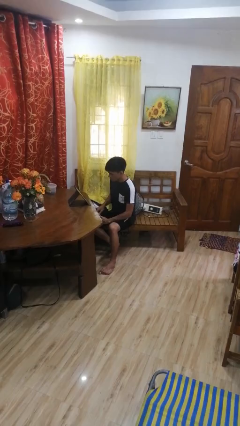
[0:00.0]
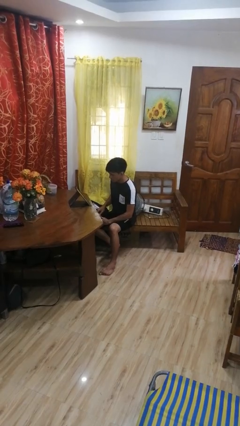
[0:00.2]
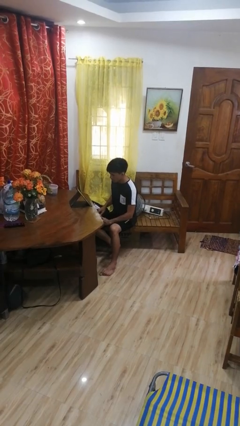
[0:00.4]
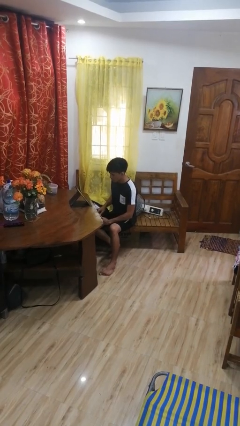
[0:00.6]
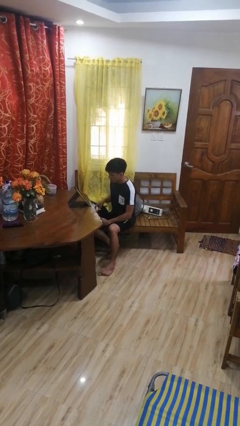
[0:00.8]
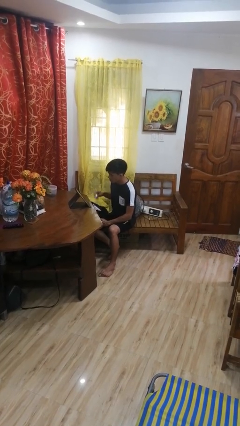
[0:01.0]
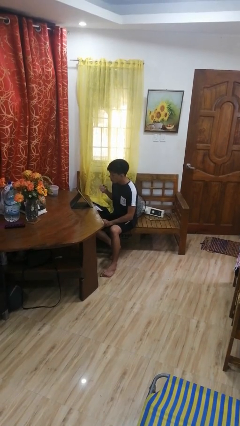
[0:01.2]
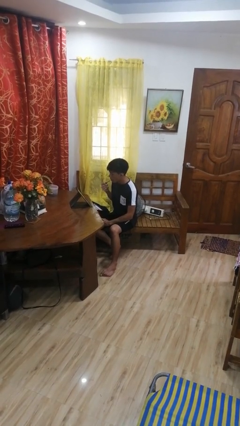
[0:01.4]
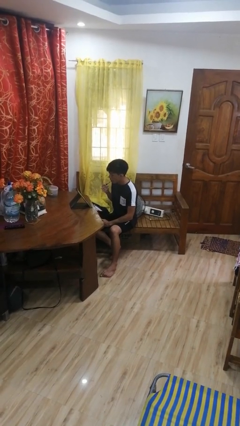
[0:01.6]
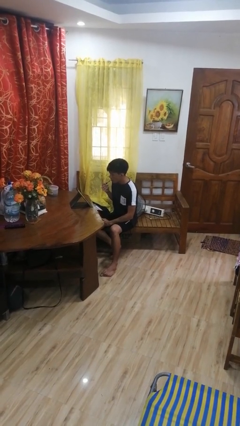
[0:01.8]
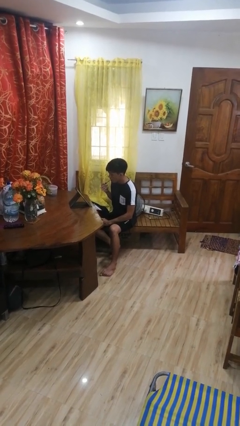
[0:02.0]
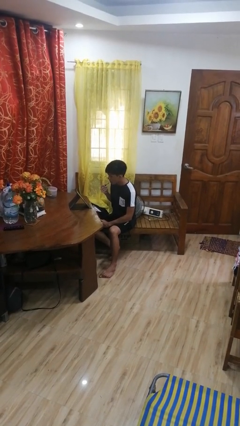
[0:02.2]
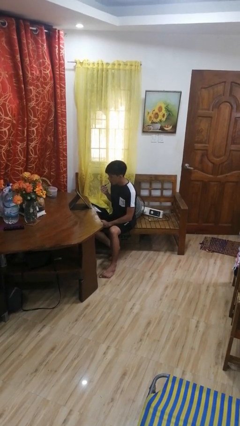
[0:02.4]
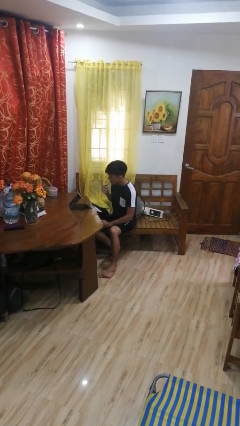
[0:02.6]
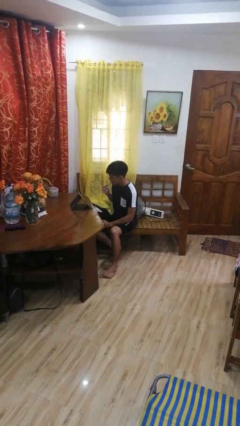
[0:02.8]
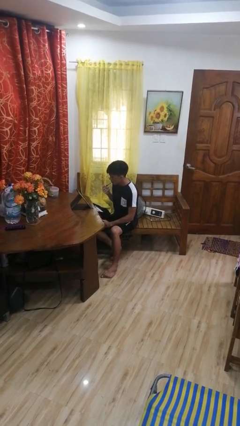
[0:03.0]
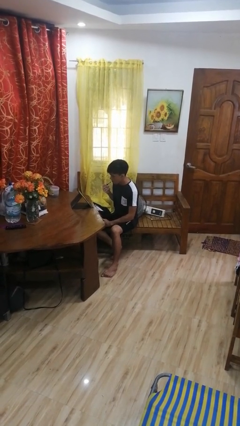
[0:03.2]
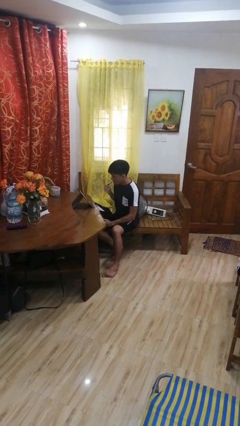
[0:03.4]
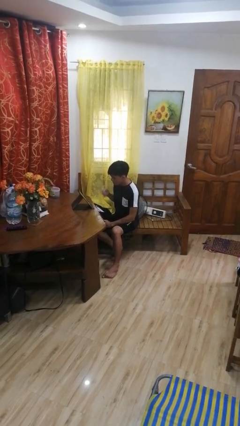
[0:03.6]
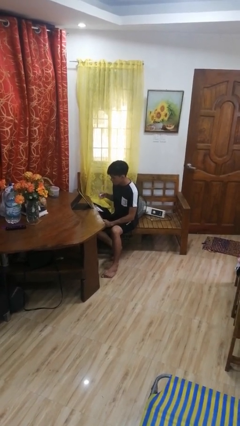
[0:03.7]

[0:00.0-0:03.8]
person applies lip makeup

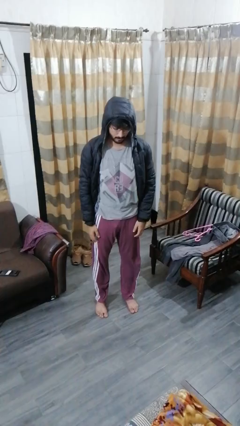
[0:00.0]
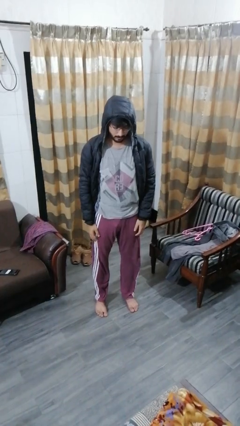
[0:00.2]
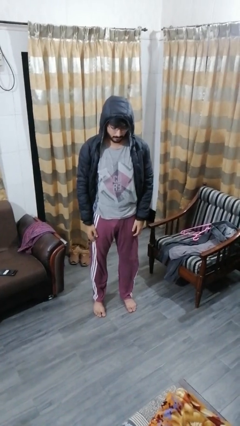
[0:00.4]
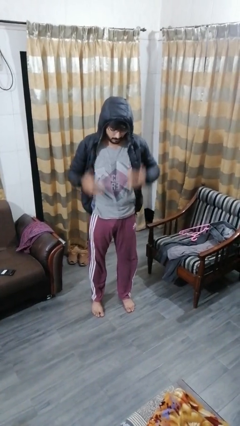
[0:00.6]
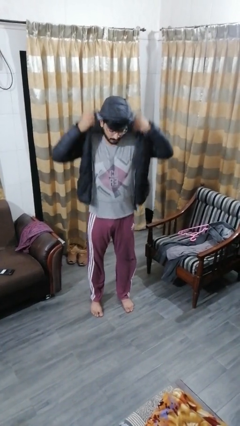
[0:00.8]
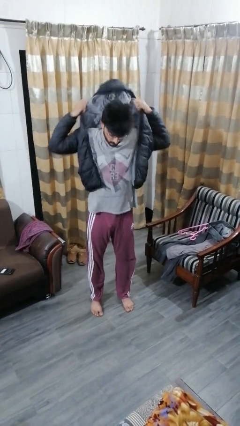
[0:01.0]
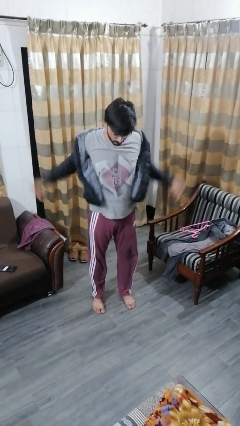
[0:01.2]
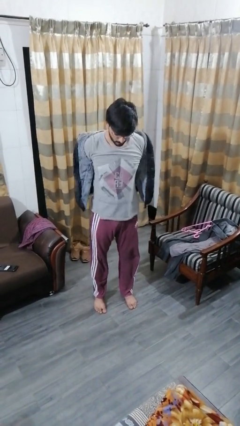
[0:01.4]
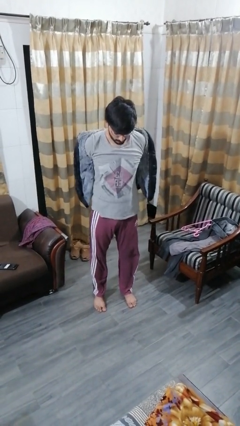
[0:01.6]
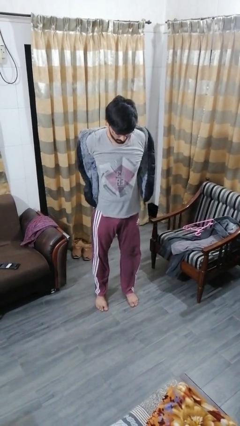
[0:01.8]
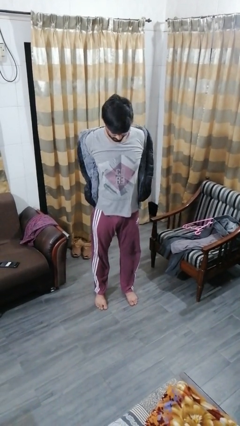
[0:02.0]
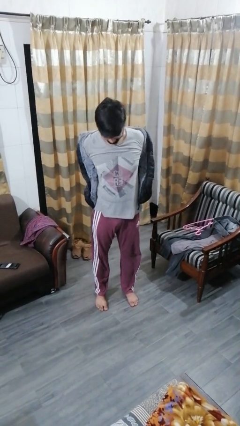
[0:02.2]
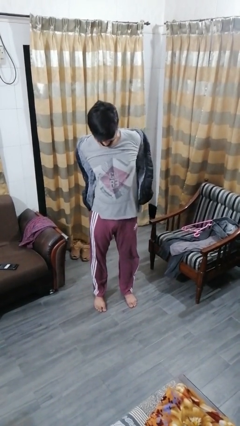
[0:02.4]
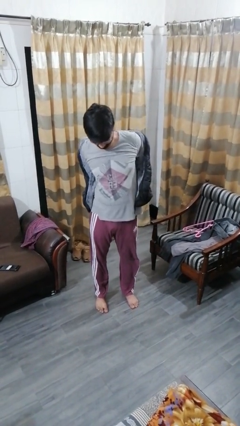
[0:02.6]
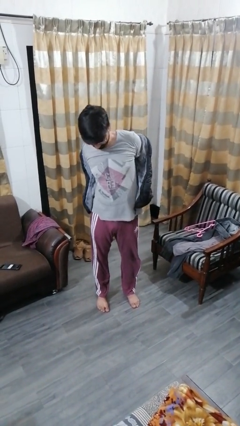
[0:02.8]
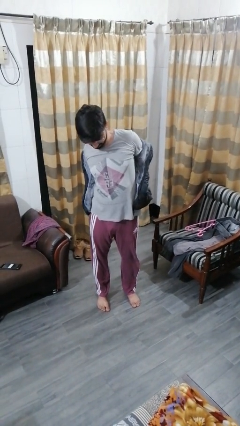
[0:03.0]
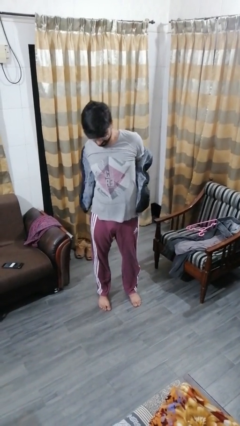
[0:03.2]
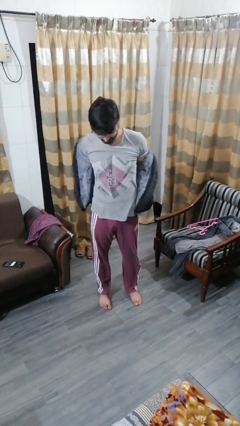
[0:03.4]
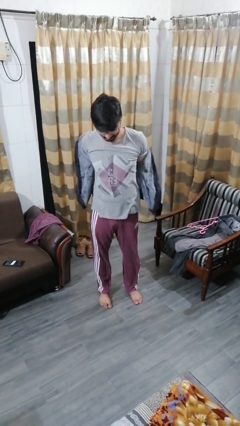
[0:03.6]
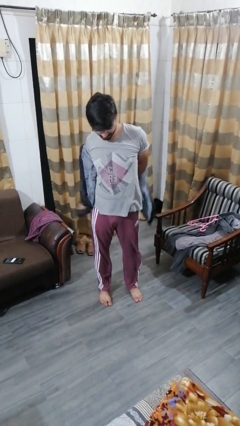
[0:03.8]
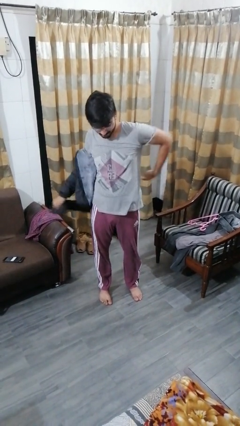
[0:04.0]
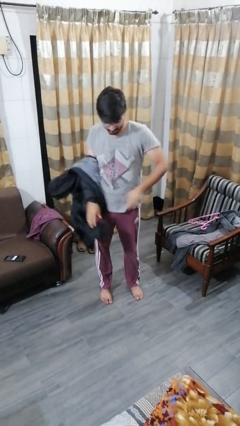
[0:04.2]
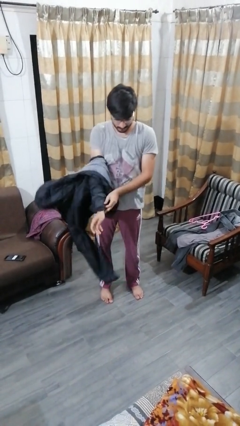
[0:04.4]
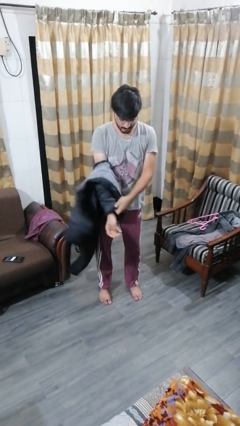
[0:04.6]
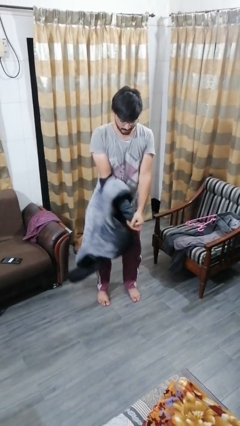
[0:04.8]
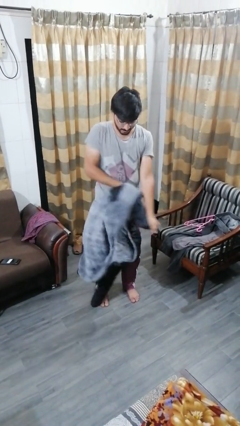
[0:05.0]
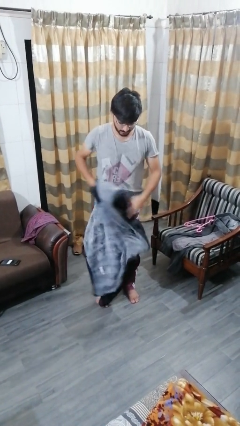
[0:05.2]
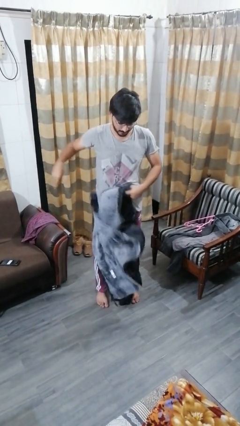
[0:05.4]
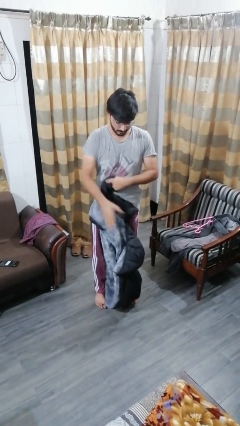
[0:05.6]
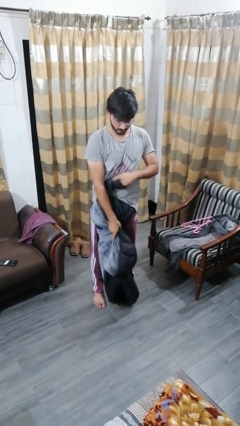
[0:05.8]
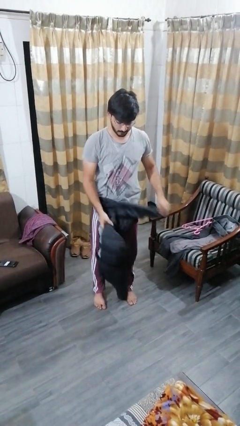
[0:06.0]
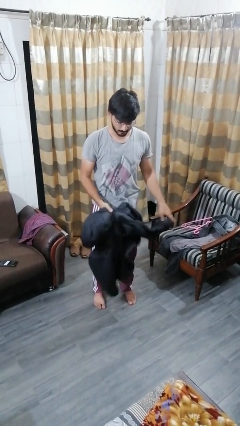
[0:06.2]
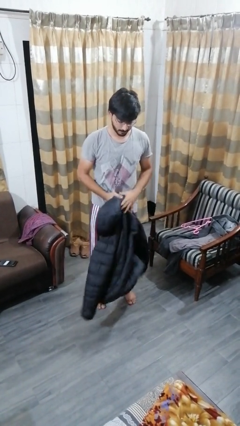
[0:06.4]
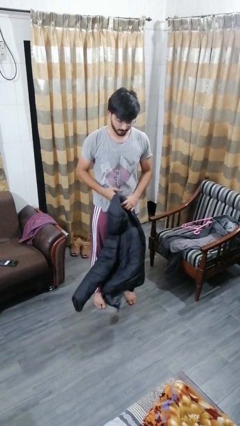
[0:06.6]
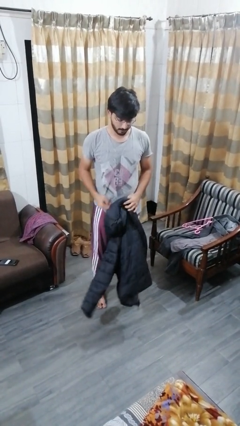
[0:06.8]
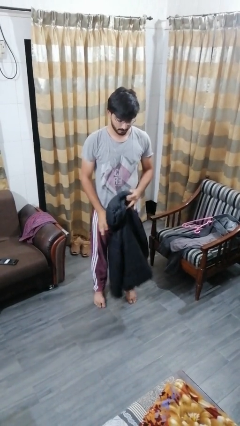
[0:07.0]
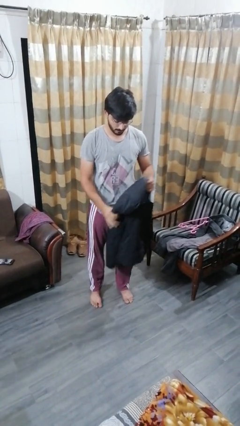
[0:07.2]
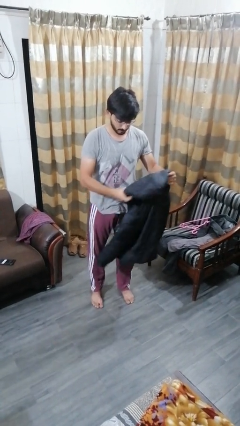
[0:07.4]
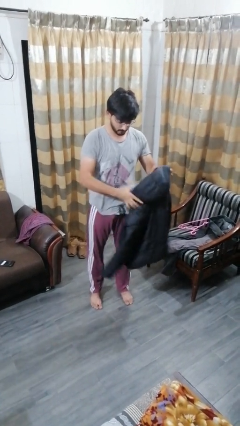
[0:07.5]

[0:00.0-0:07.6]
person takes off hoodie

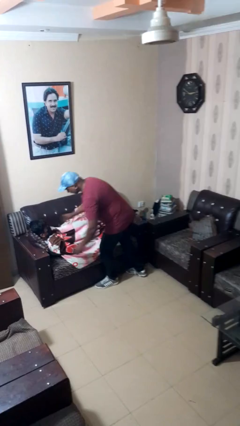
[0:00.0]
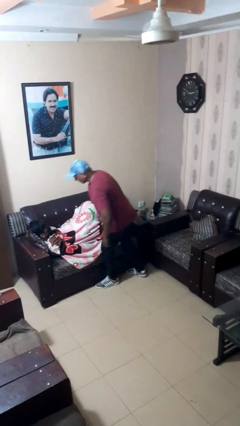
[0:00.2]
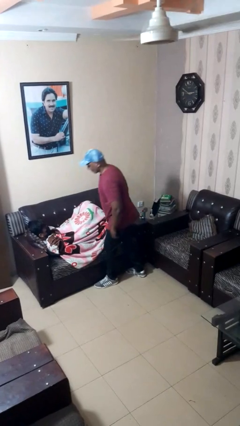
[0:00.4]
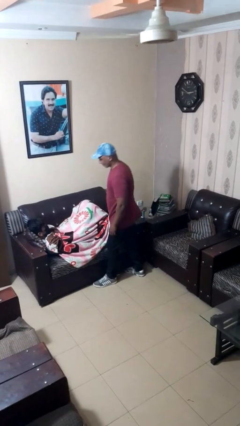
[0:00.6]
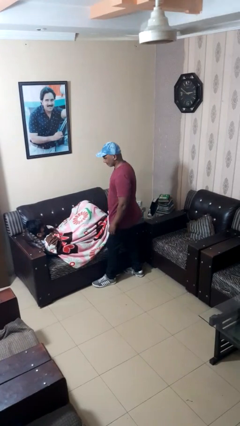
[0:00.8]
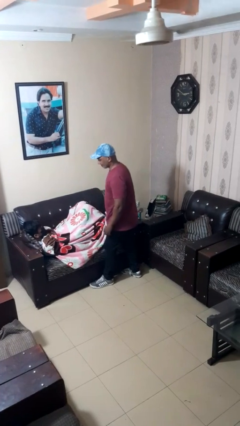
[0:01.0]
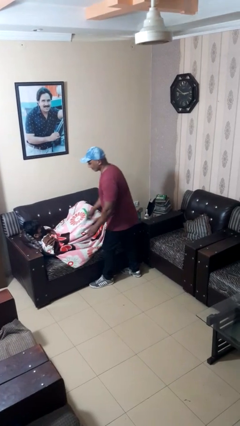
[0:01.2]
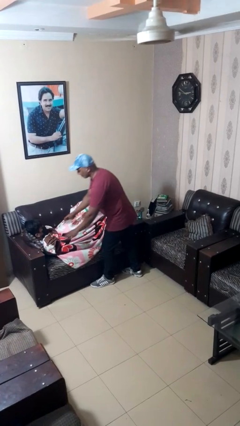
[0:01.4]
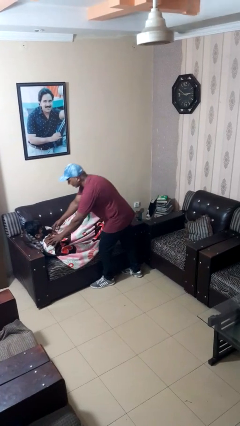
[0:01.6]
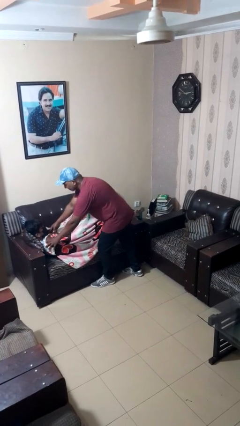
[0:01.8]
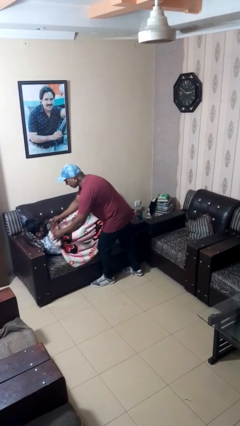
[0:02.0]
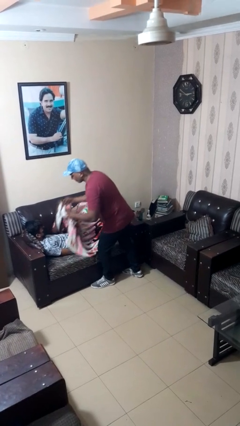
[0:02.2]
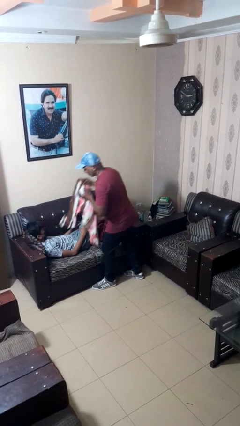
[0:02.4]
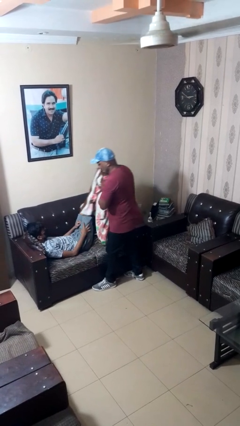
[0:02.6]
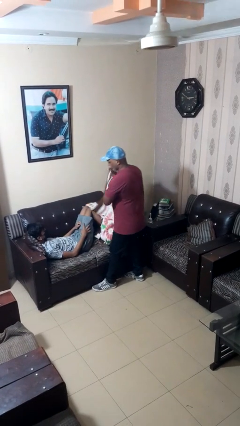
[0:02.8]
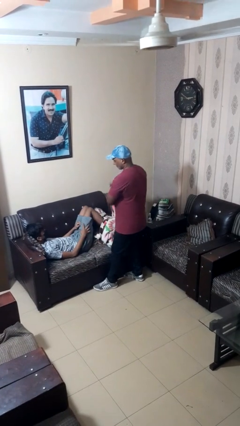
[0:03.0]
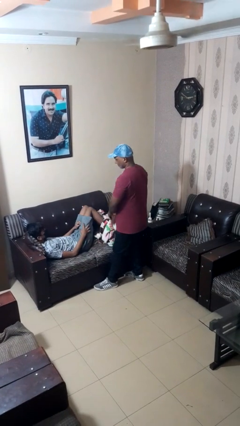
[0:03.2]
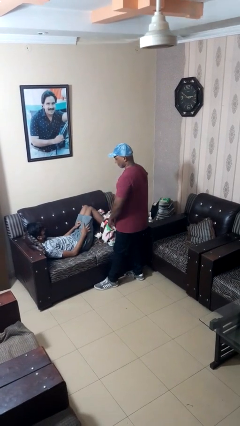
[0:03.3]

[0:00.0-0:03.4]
person uncovers friend with blanket

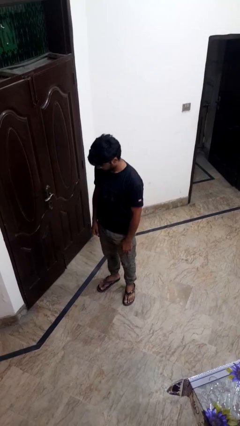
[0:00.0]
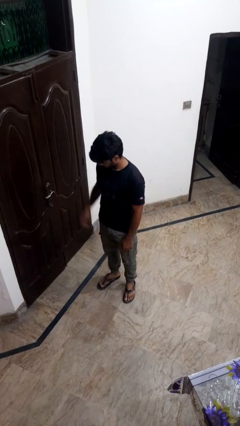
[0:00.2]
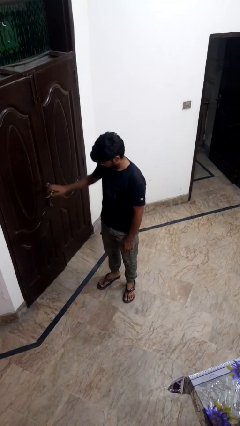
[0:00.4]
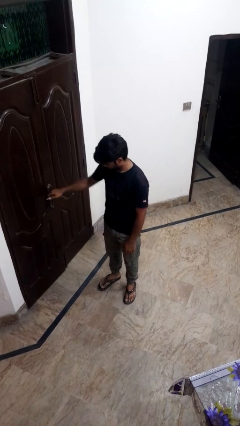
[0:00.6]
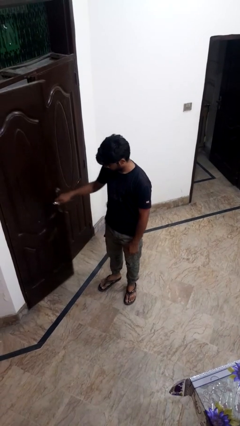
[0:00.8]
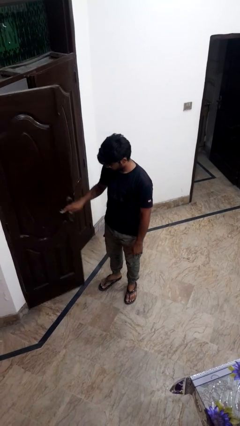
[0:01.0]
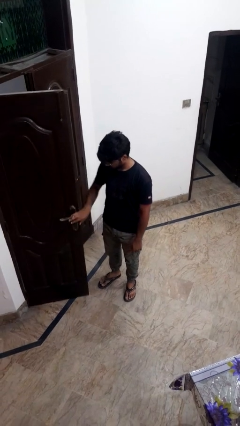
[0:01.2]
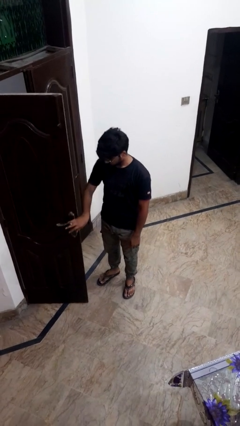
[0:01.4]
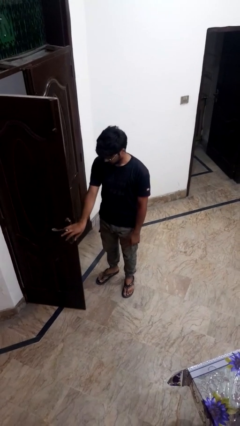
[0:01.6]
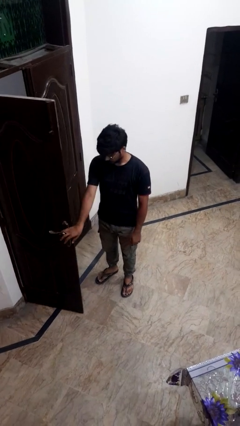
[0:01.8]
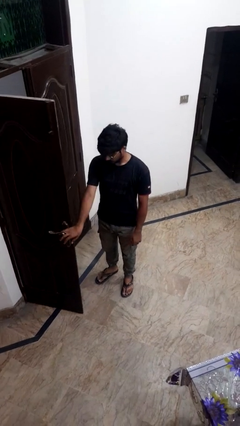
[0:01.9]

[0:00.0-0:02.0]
person opens facility door

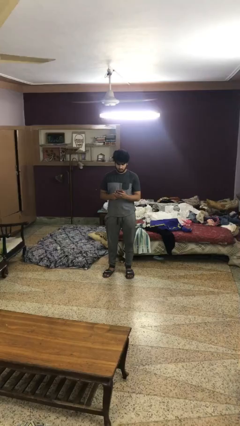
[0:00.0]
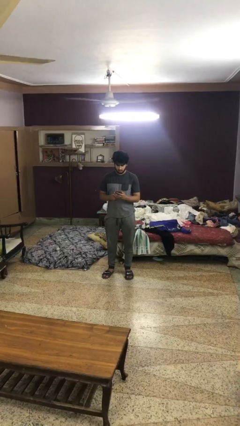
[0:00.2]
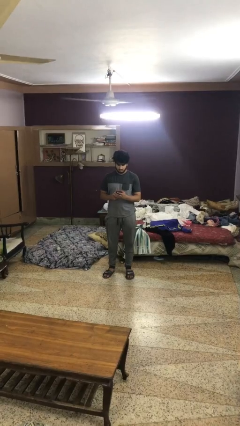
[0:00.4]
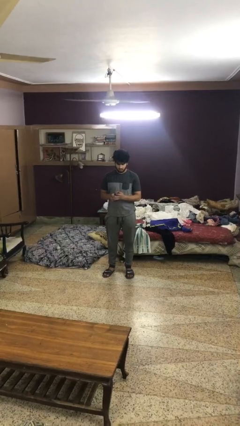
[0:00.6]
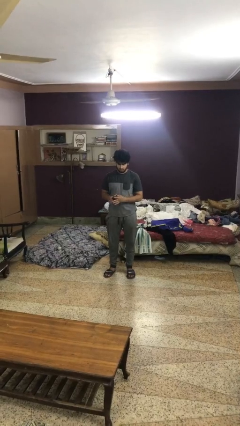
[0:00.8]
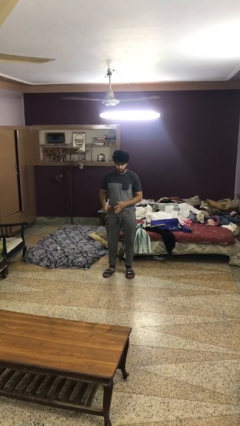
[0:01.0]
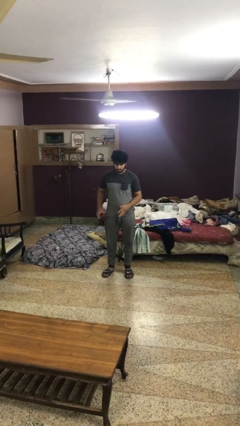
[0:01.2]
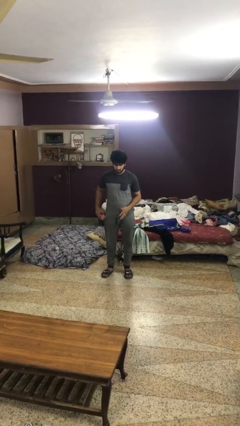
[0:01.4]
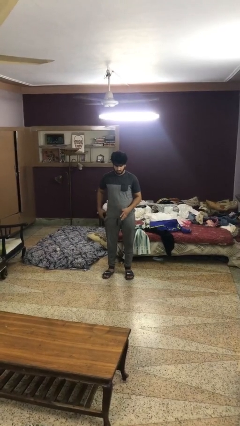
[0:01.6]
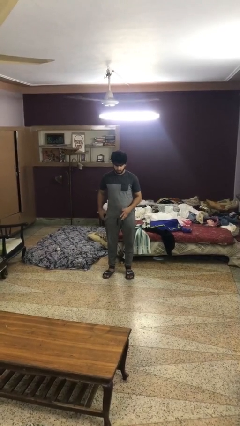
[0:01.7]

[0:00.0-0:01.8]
person puts phone into pocket
